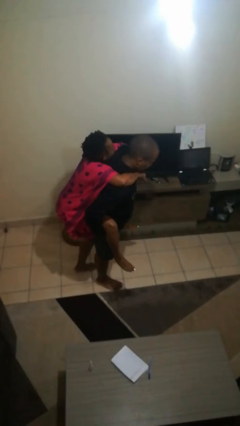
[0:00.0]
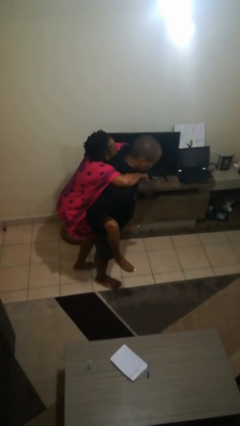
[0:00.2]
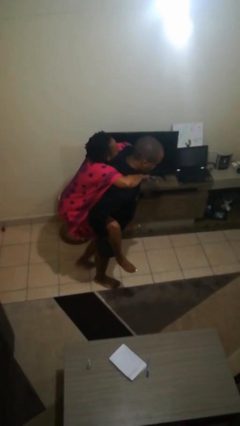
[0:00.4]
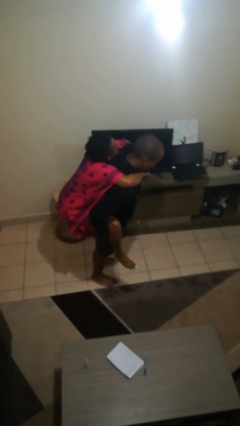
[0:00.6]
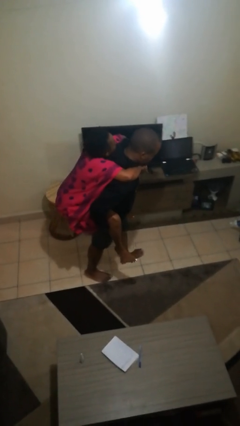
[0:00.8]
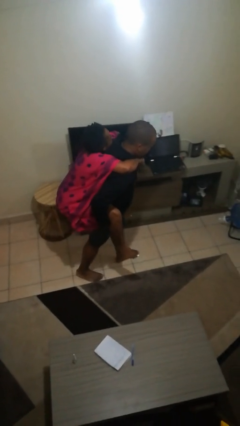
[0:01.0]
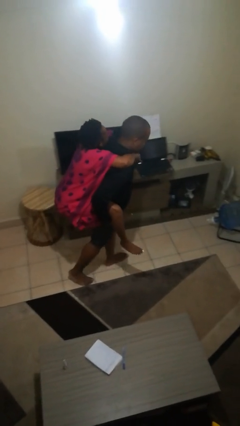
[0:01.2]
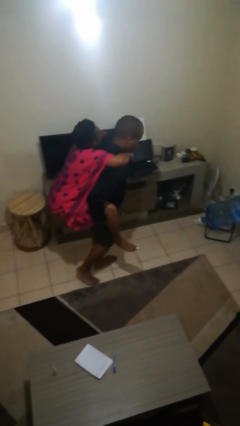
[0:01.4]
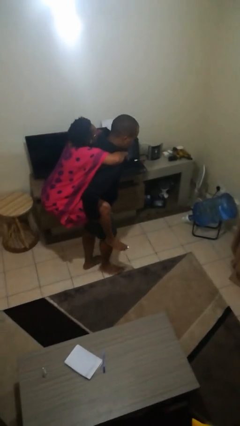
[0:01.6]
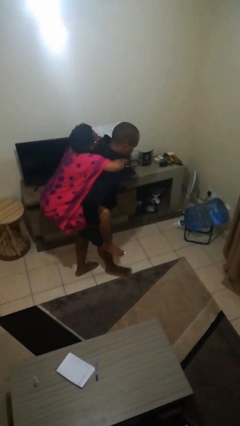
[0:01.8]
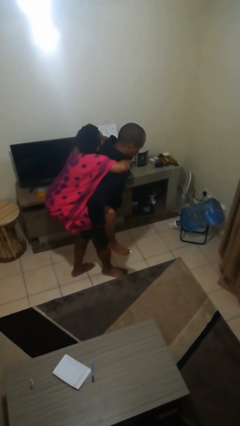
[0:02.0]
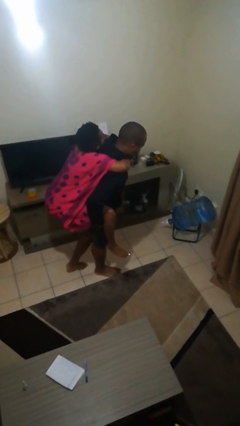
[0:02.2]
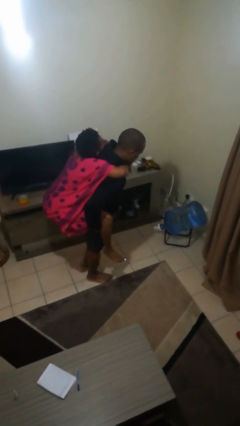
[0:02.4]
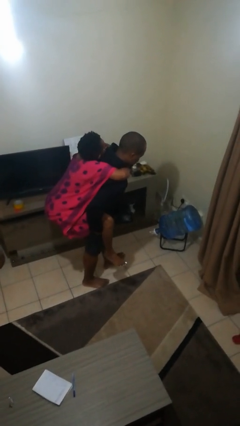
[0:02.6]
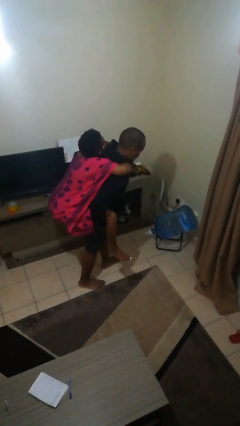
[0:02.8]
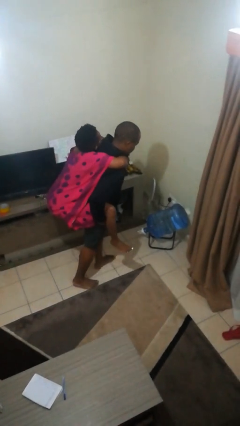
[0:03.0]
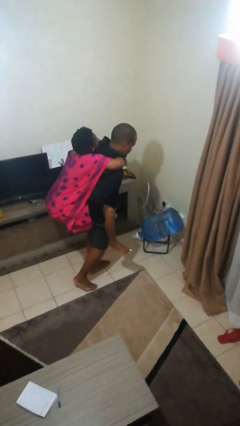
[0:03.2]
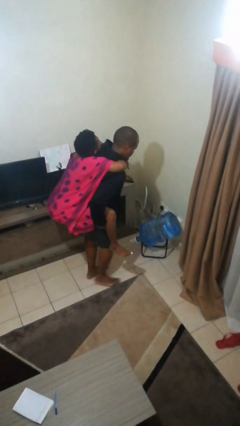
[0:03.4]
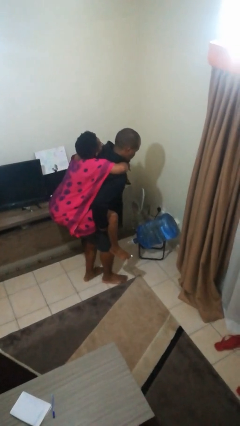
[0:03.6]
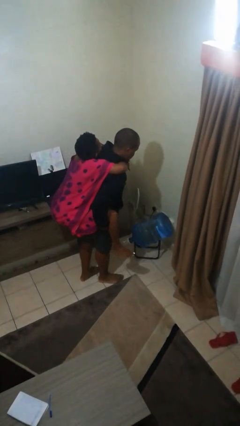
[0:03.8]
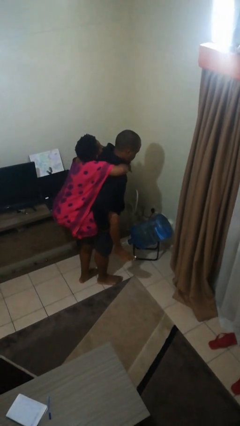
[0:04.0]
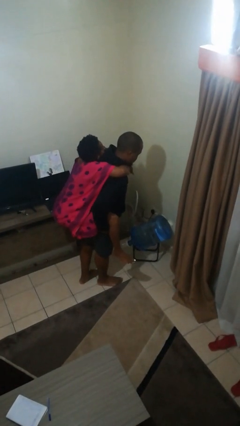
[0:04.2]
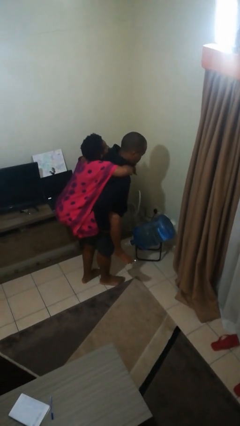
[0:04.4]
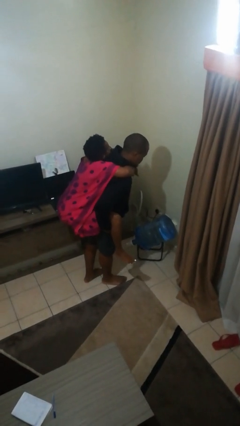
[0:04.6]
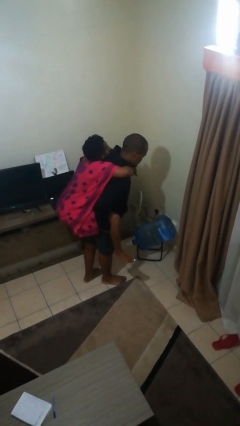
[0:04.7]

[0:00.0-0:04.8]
person carries person on back

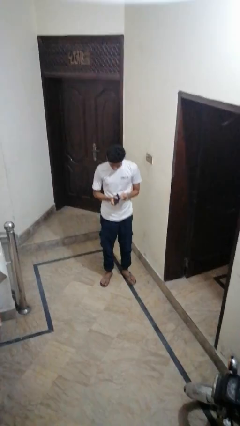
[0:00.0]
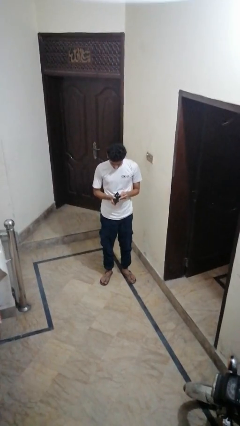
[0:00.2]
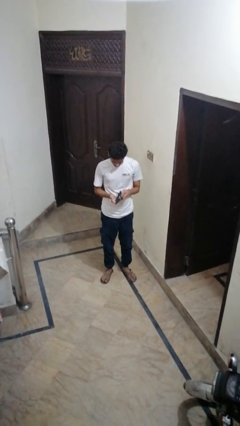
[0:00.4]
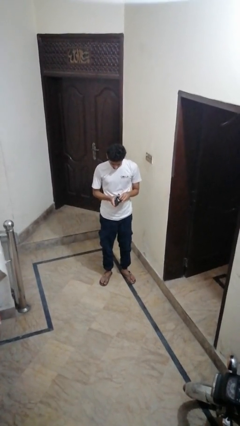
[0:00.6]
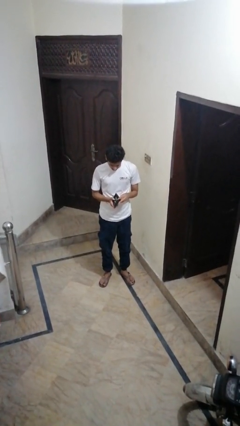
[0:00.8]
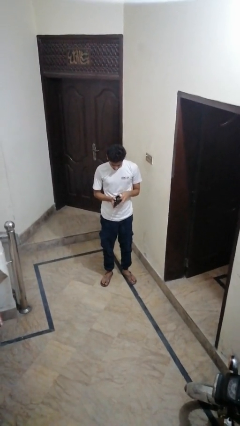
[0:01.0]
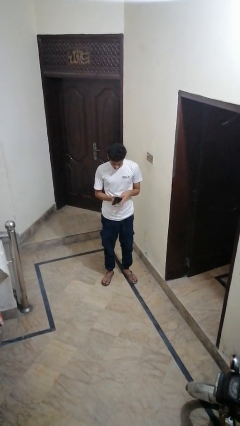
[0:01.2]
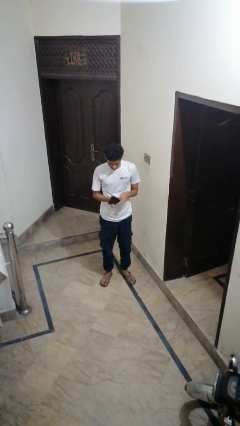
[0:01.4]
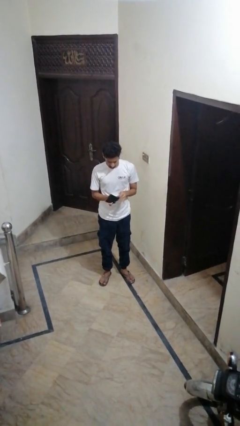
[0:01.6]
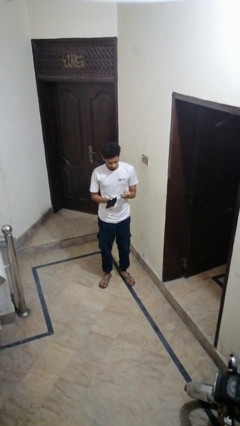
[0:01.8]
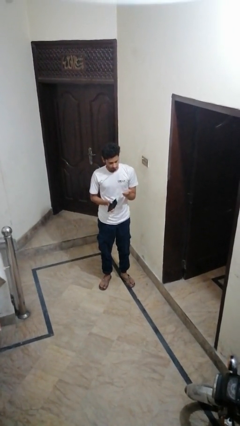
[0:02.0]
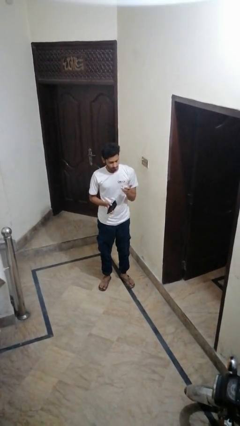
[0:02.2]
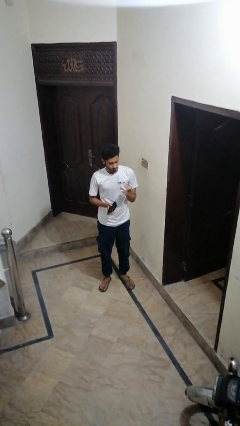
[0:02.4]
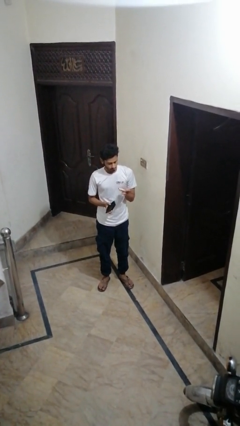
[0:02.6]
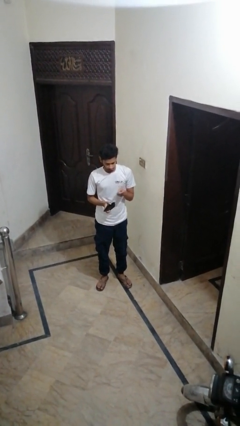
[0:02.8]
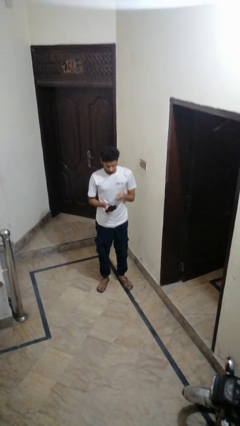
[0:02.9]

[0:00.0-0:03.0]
person takes object from purse

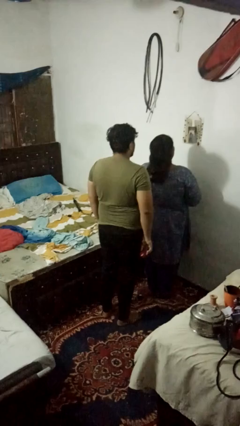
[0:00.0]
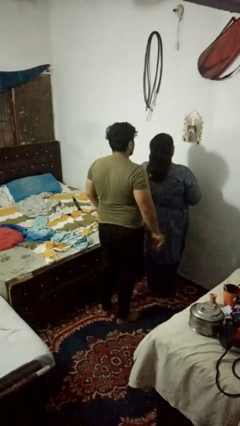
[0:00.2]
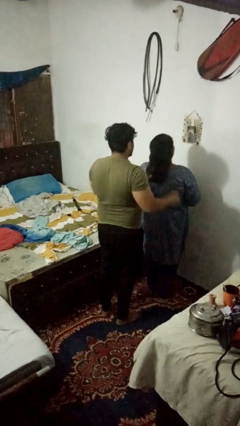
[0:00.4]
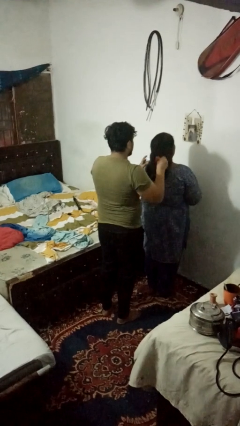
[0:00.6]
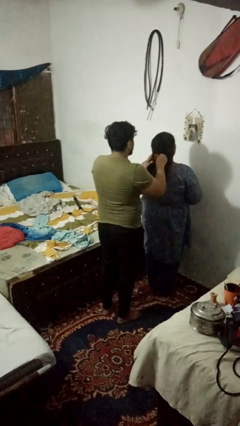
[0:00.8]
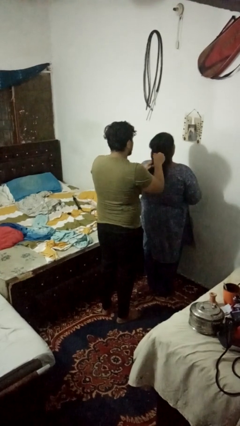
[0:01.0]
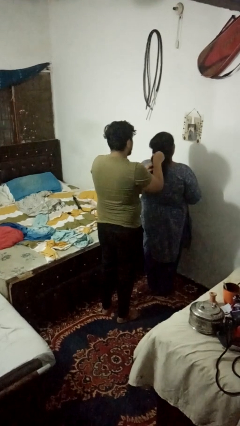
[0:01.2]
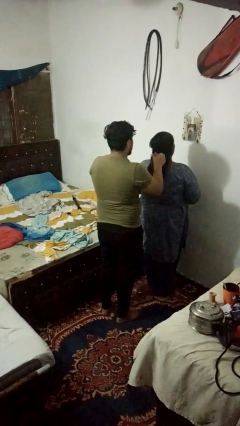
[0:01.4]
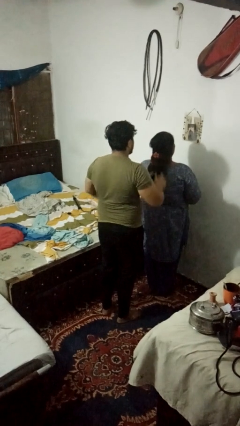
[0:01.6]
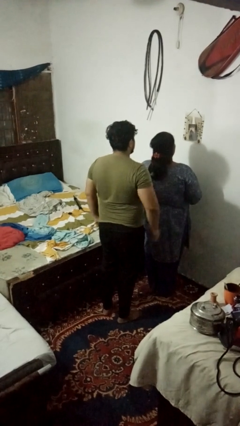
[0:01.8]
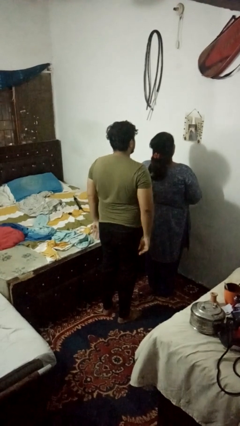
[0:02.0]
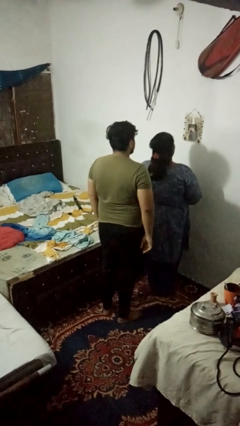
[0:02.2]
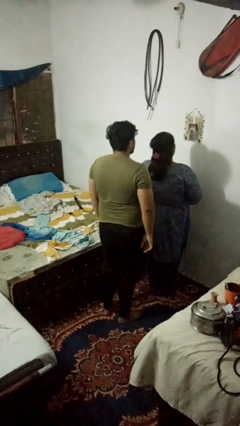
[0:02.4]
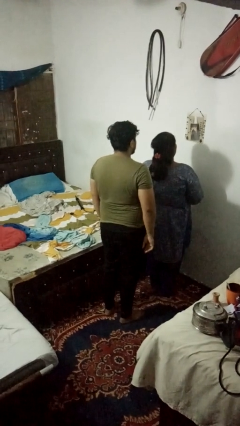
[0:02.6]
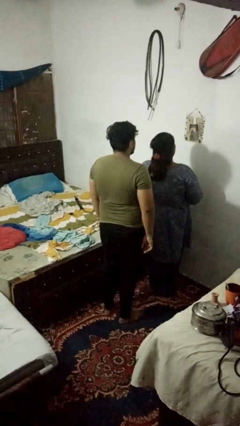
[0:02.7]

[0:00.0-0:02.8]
person braids hair of person

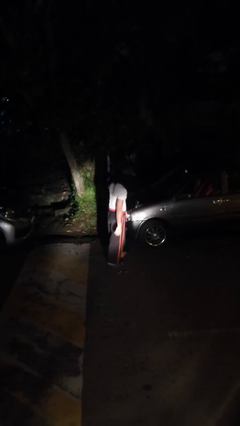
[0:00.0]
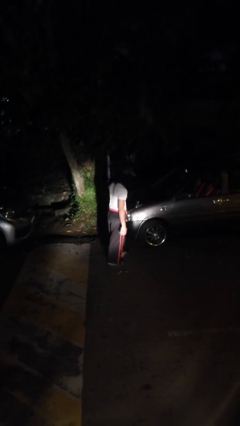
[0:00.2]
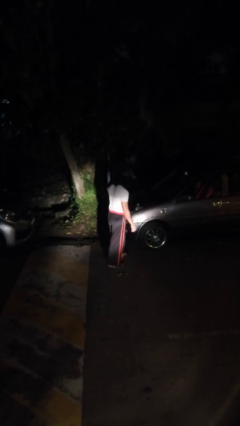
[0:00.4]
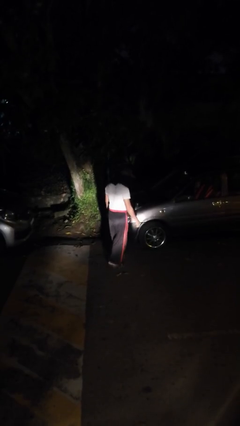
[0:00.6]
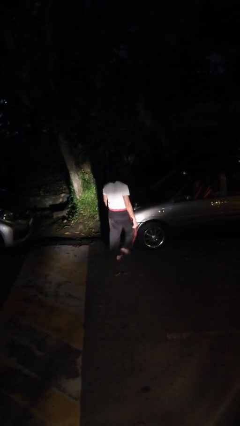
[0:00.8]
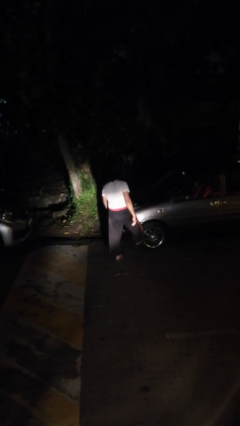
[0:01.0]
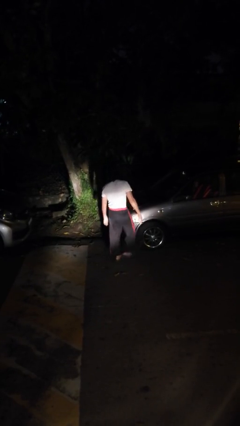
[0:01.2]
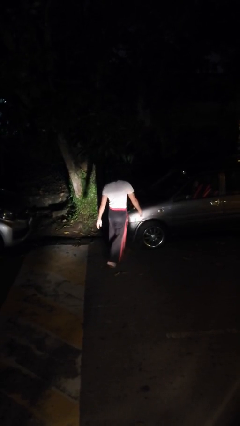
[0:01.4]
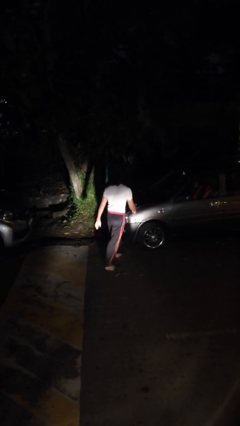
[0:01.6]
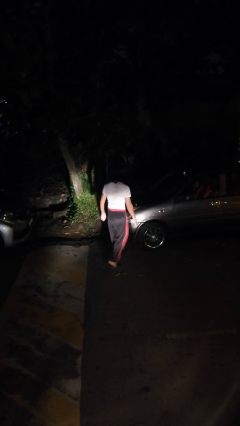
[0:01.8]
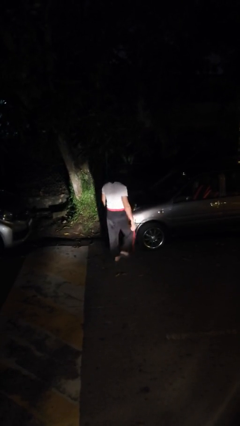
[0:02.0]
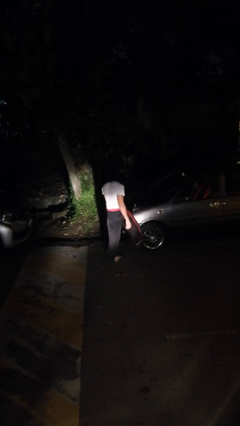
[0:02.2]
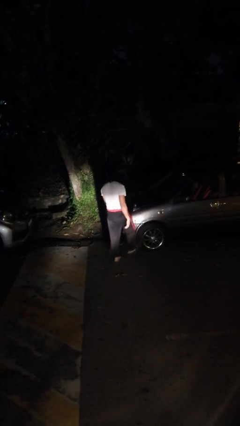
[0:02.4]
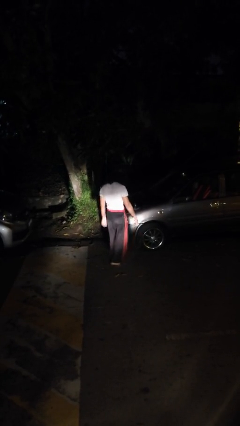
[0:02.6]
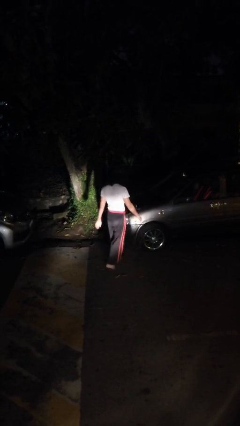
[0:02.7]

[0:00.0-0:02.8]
person kicks car tires

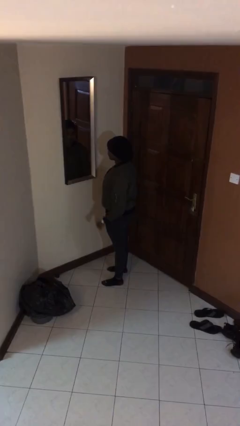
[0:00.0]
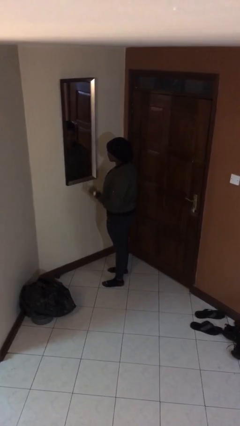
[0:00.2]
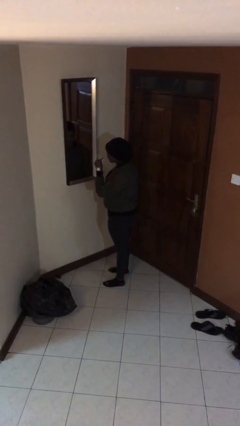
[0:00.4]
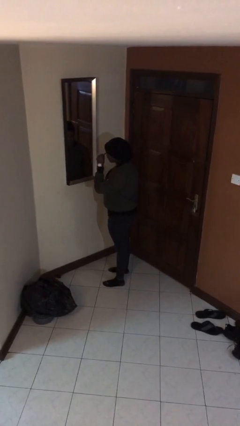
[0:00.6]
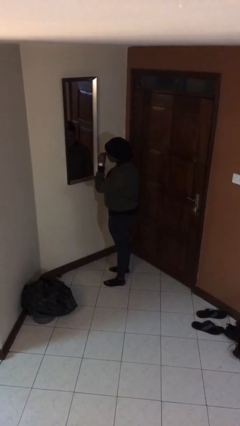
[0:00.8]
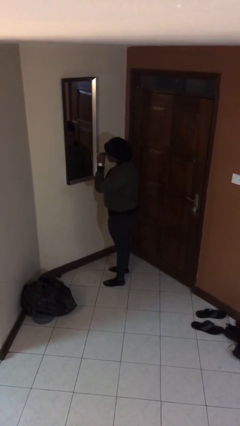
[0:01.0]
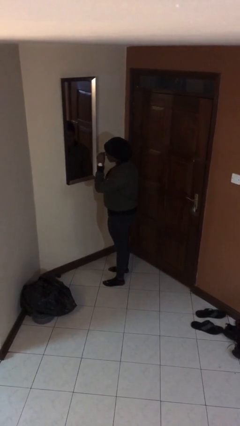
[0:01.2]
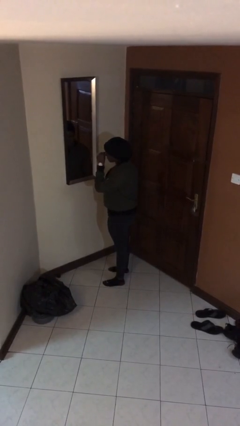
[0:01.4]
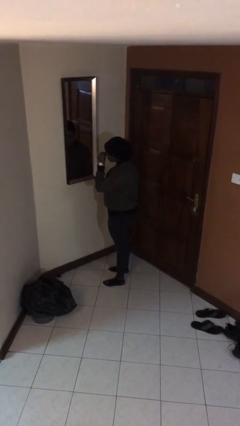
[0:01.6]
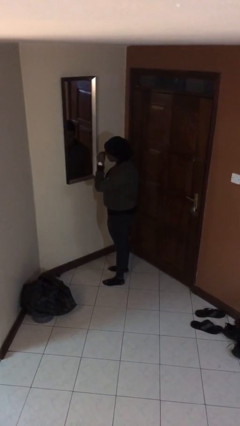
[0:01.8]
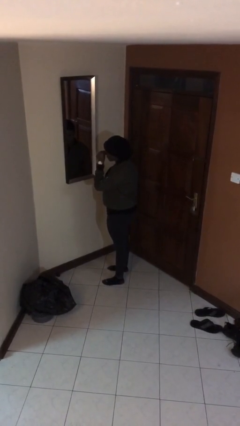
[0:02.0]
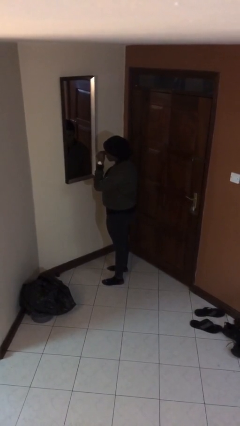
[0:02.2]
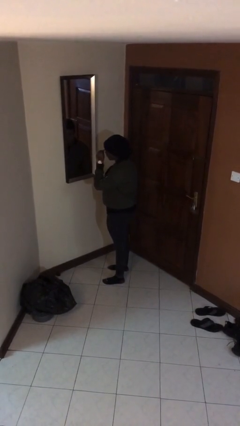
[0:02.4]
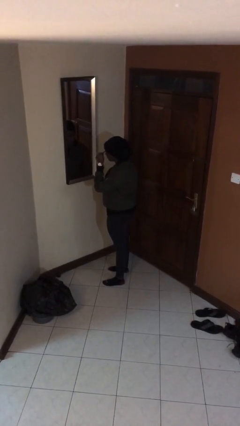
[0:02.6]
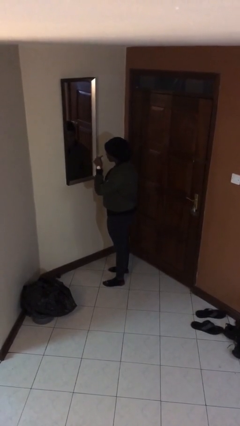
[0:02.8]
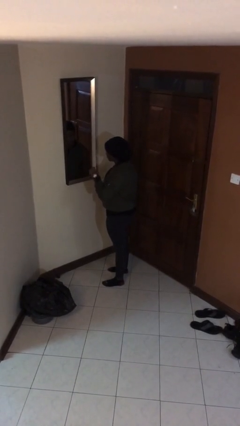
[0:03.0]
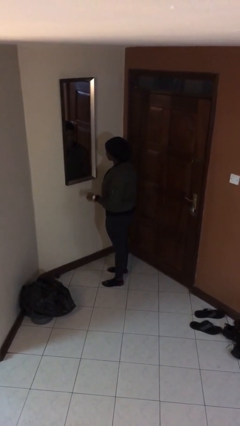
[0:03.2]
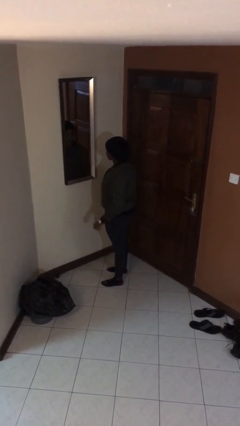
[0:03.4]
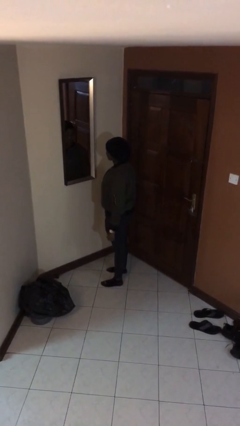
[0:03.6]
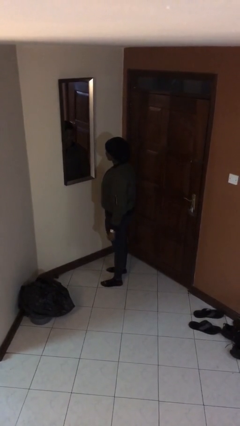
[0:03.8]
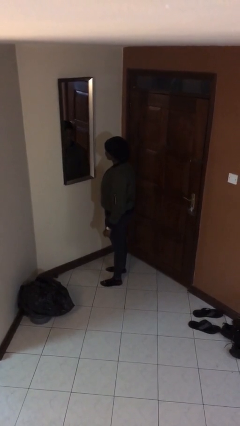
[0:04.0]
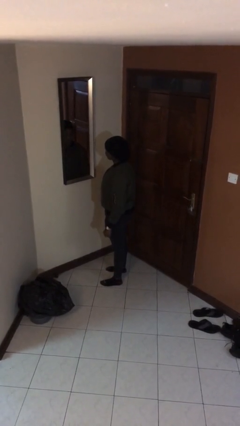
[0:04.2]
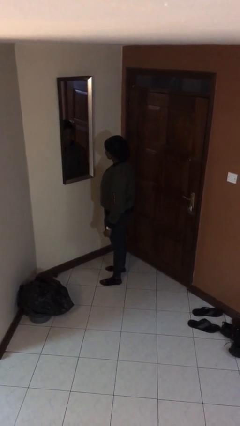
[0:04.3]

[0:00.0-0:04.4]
person applies eye makeup
